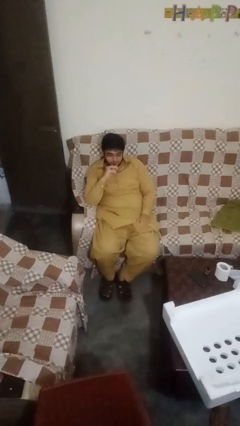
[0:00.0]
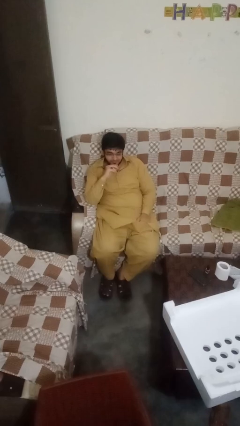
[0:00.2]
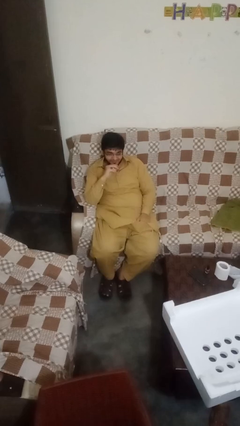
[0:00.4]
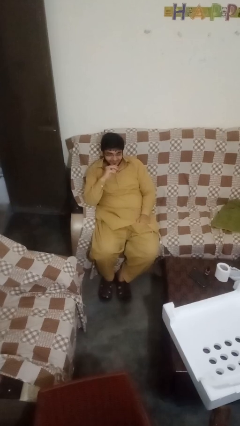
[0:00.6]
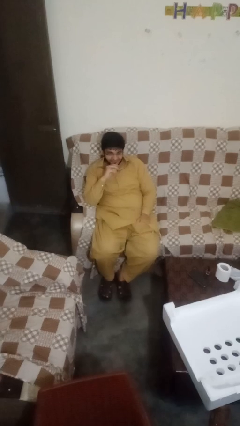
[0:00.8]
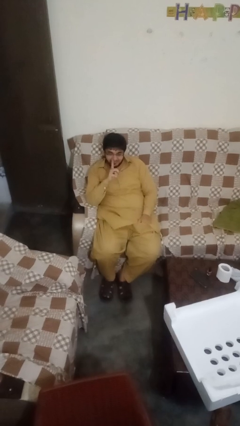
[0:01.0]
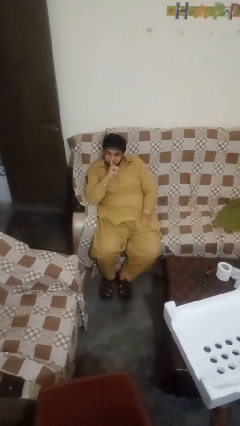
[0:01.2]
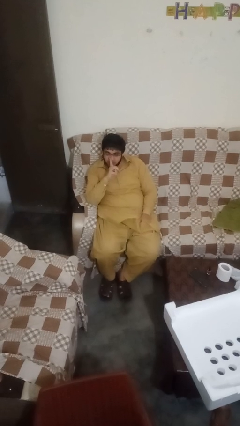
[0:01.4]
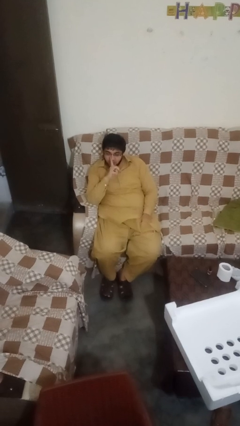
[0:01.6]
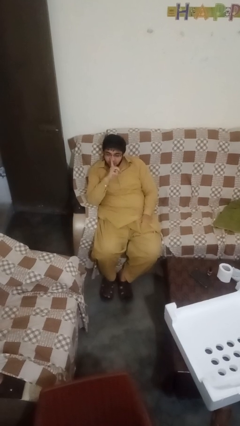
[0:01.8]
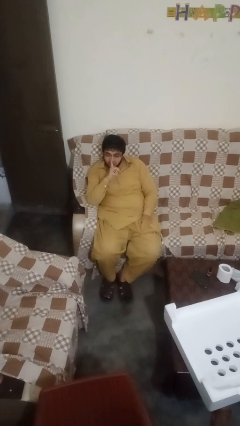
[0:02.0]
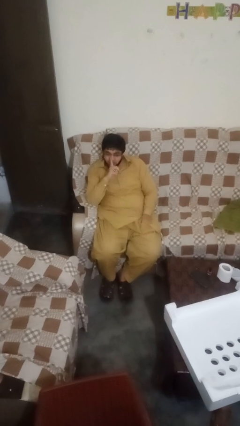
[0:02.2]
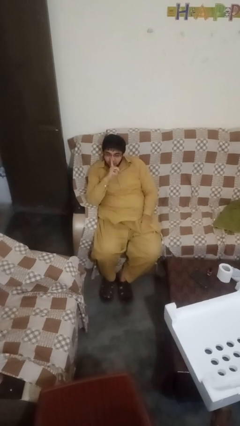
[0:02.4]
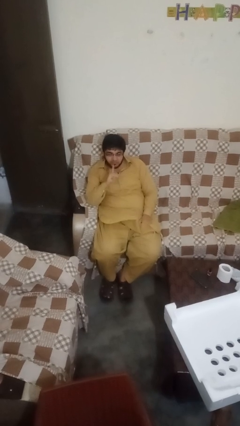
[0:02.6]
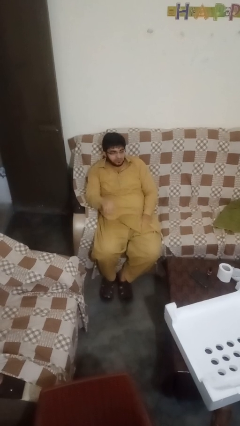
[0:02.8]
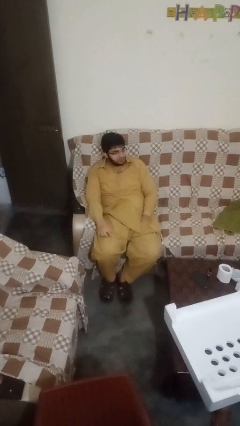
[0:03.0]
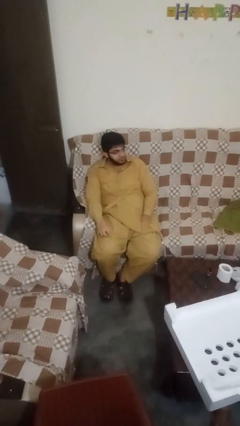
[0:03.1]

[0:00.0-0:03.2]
person gestures be quiet

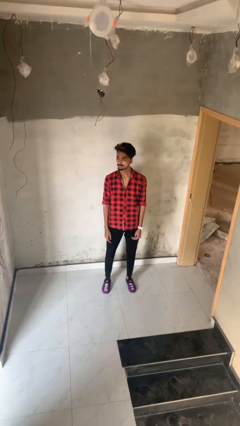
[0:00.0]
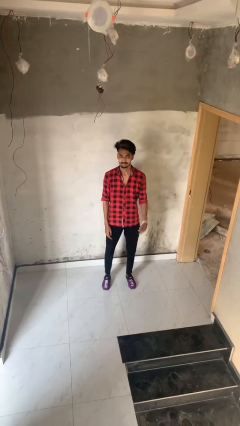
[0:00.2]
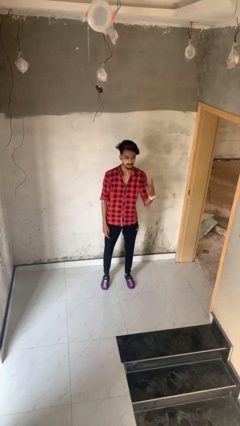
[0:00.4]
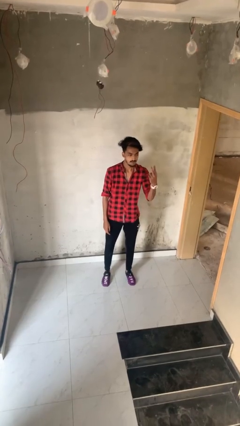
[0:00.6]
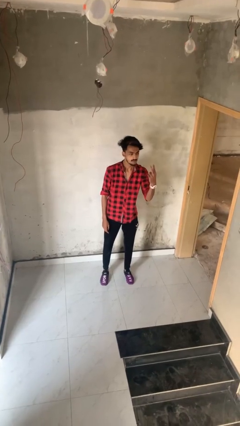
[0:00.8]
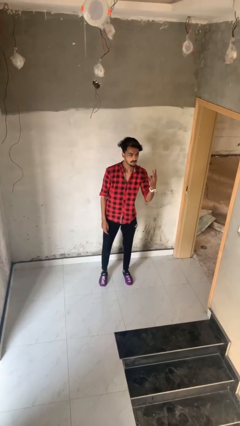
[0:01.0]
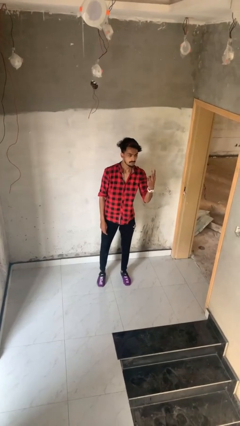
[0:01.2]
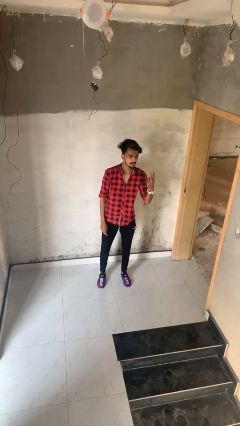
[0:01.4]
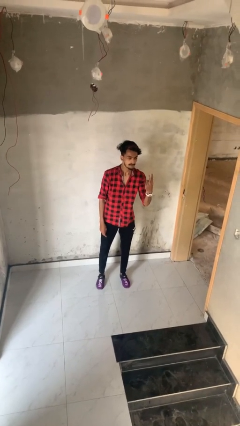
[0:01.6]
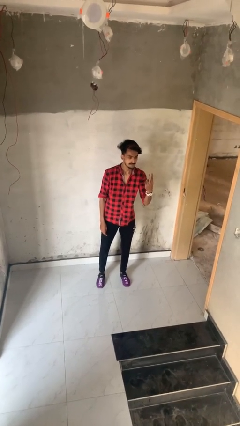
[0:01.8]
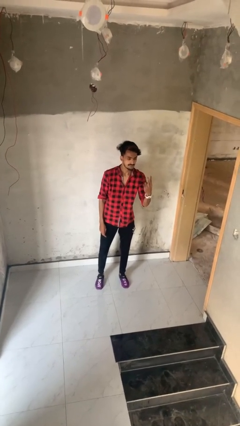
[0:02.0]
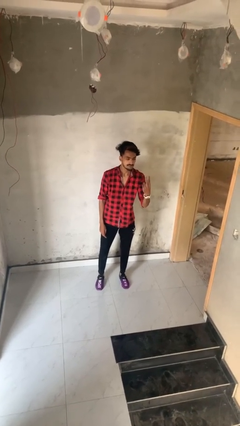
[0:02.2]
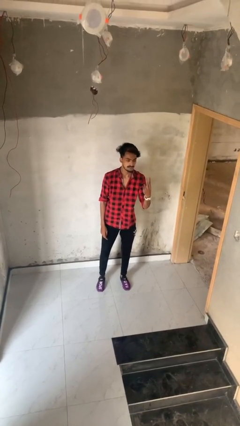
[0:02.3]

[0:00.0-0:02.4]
person gestures peace

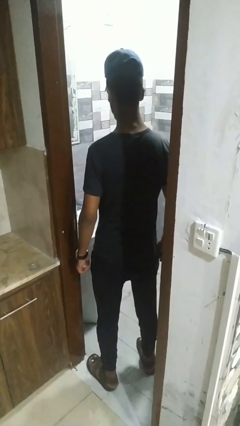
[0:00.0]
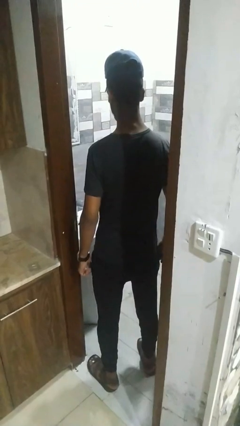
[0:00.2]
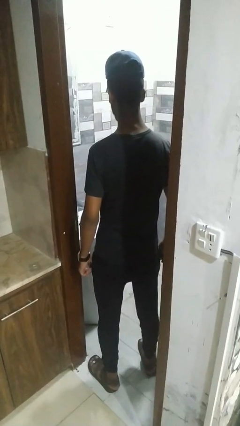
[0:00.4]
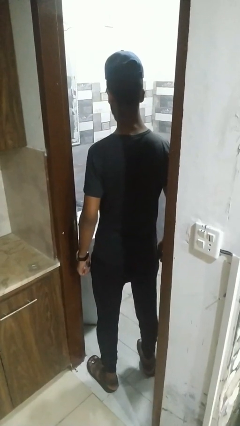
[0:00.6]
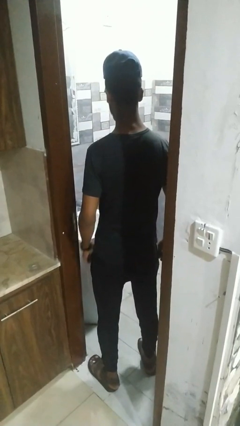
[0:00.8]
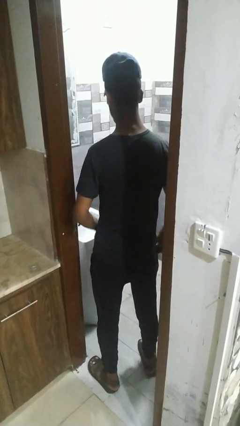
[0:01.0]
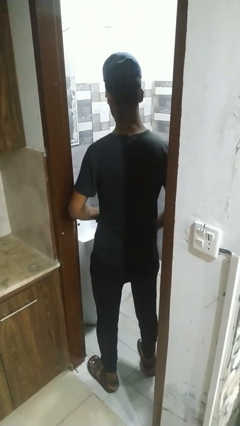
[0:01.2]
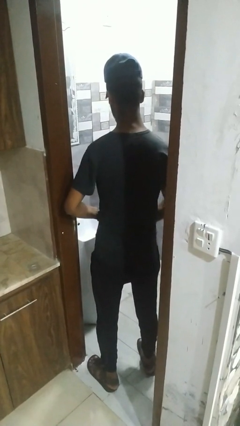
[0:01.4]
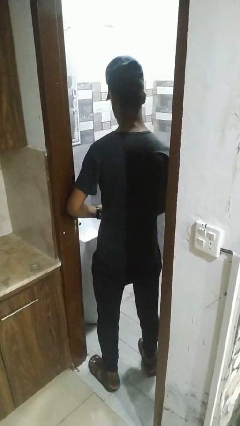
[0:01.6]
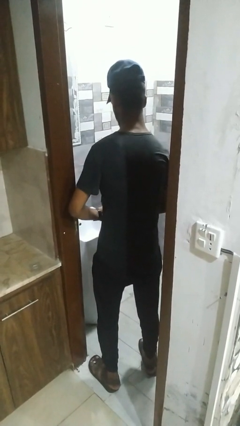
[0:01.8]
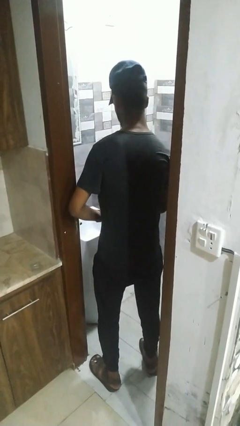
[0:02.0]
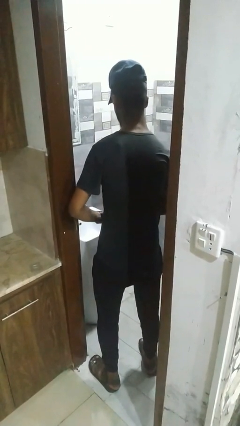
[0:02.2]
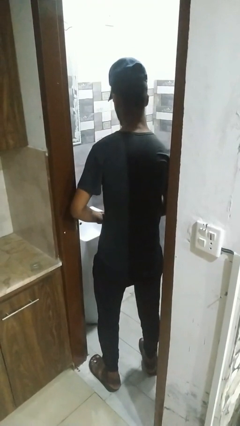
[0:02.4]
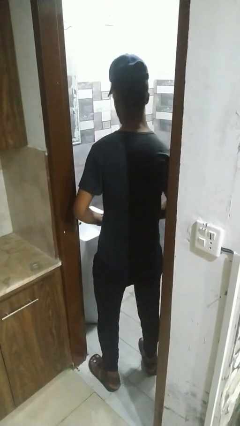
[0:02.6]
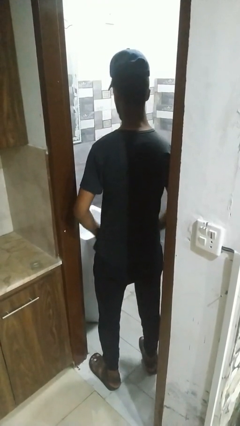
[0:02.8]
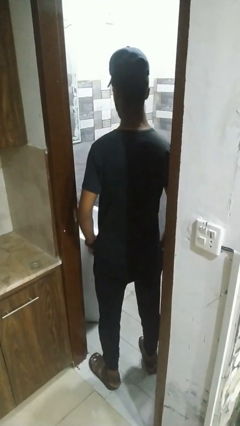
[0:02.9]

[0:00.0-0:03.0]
person applies deodorant

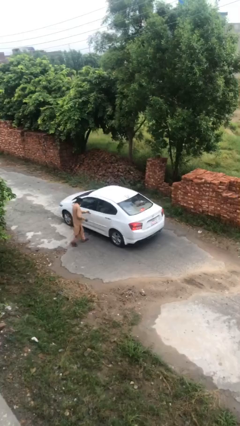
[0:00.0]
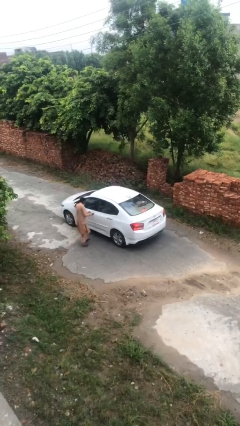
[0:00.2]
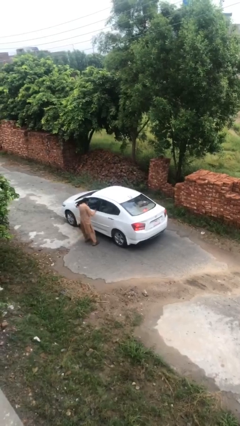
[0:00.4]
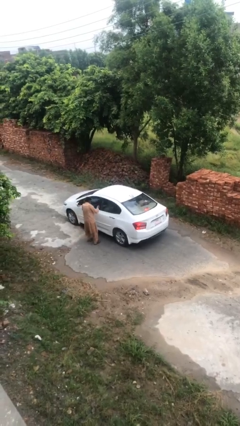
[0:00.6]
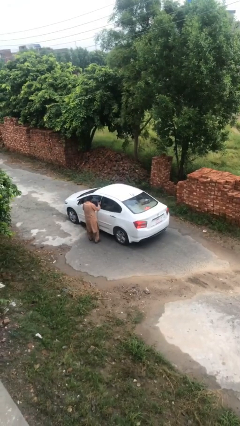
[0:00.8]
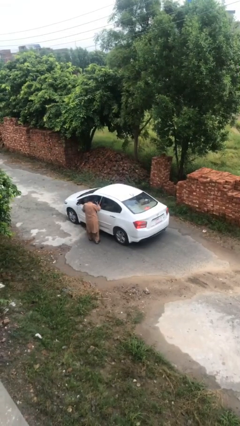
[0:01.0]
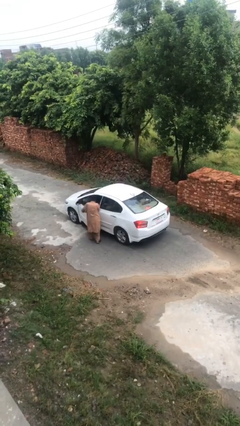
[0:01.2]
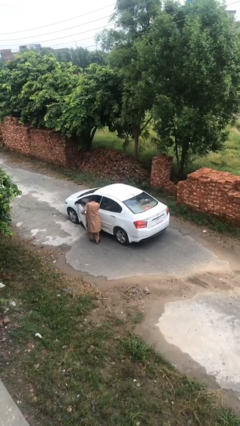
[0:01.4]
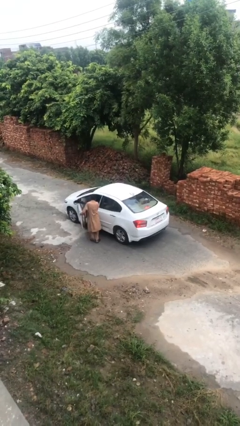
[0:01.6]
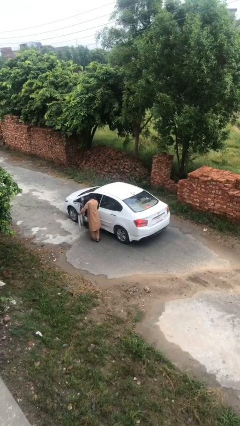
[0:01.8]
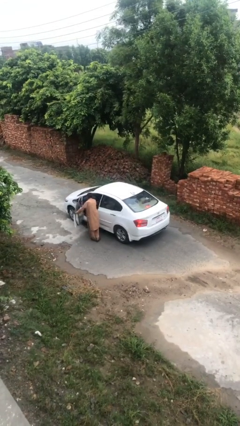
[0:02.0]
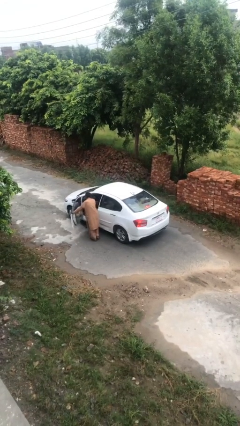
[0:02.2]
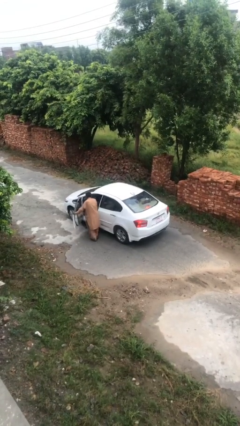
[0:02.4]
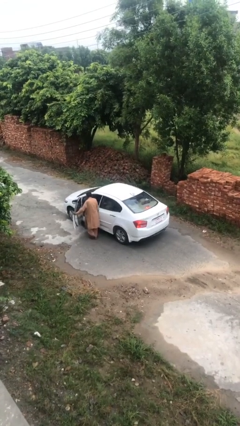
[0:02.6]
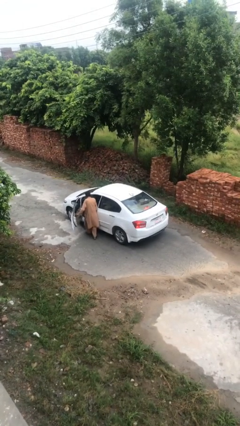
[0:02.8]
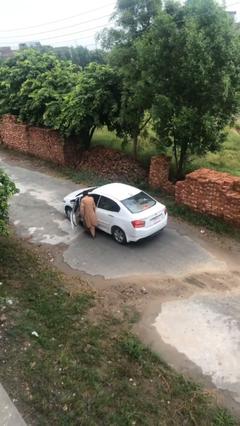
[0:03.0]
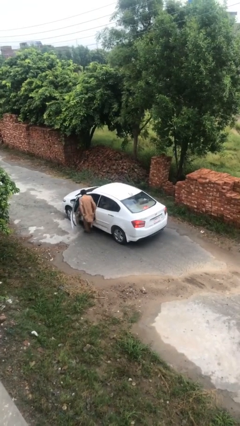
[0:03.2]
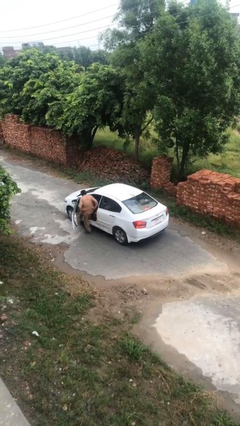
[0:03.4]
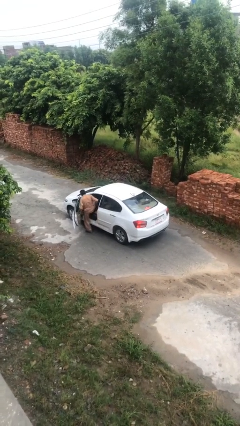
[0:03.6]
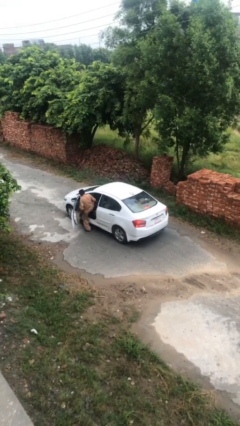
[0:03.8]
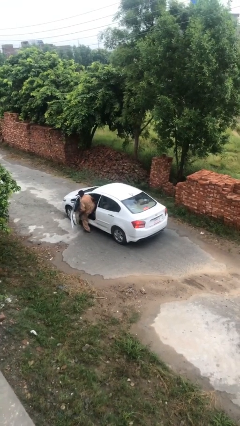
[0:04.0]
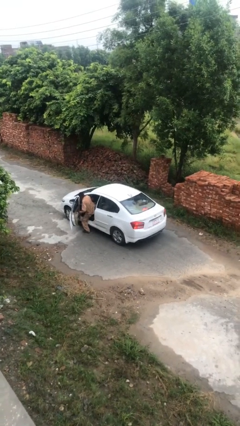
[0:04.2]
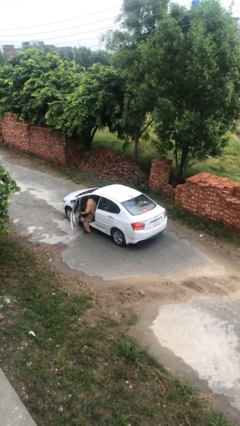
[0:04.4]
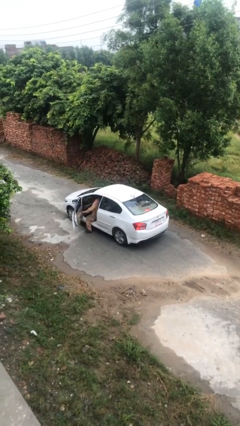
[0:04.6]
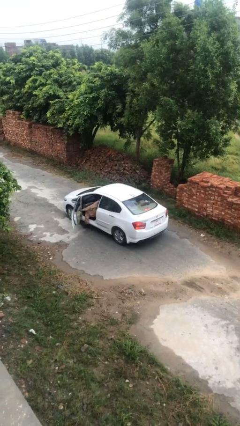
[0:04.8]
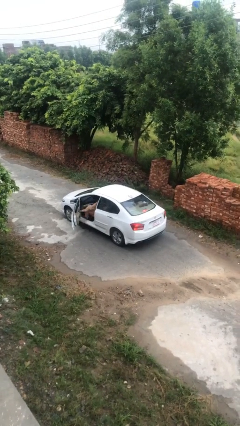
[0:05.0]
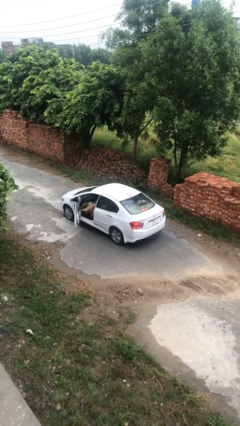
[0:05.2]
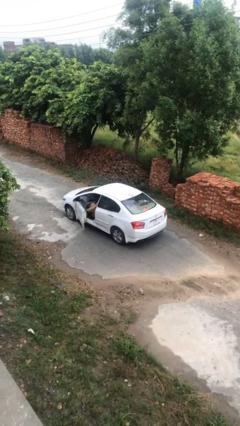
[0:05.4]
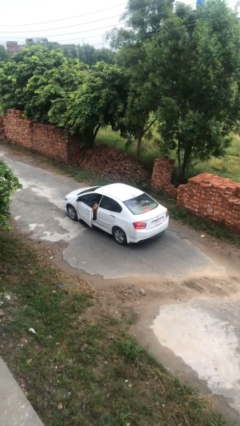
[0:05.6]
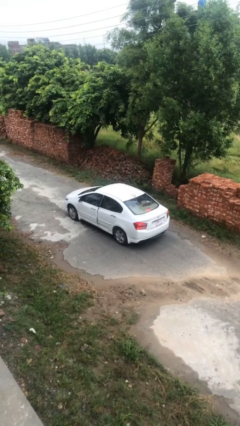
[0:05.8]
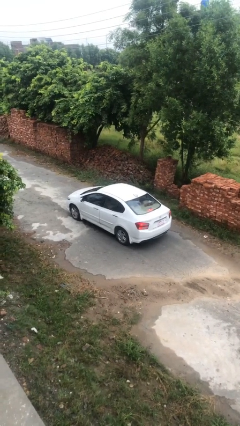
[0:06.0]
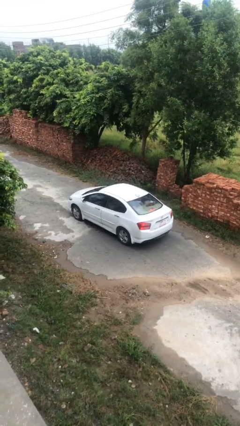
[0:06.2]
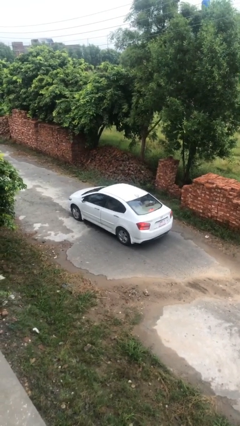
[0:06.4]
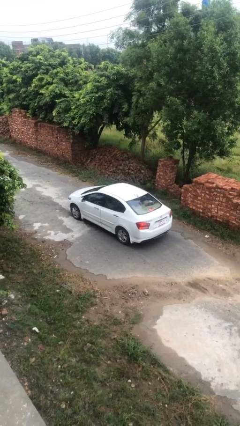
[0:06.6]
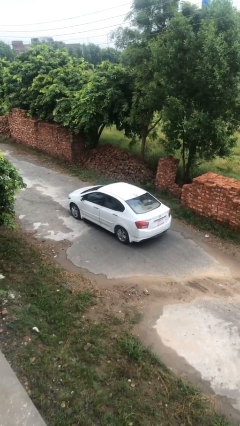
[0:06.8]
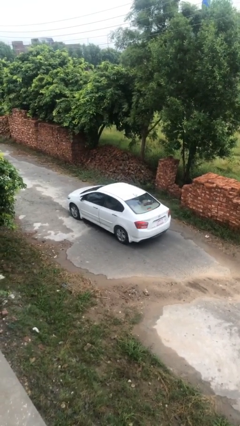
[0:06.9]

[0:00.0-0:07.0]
car picks up person

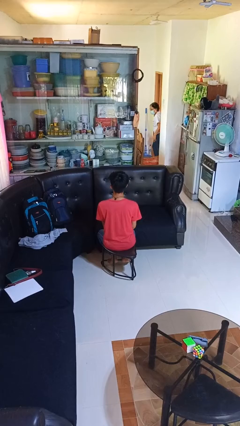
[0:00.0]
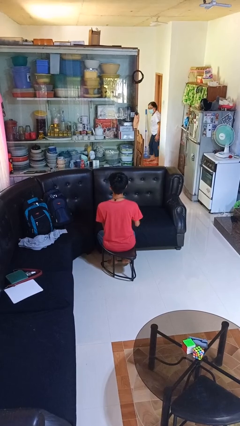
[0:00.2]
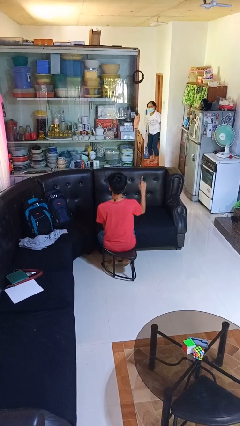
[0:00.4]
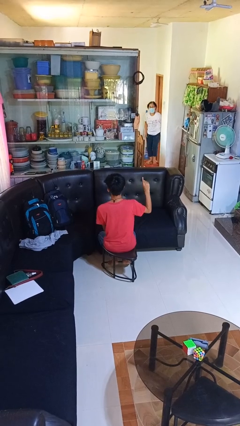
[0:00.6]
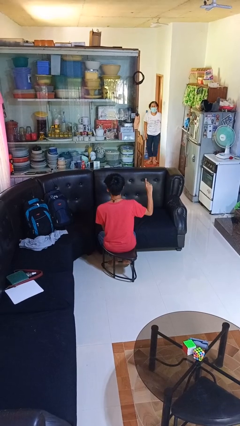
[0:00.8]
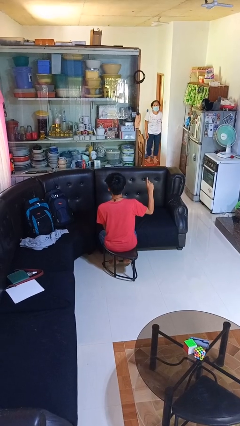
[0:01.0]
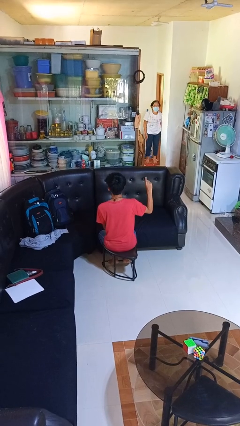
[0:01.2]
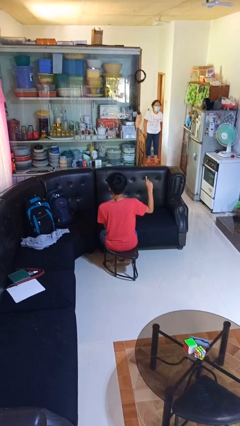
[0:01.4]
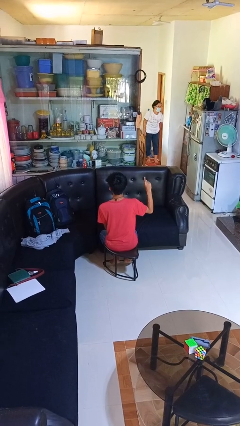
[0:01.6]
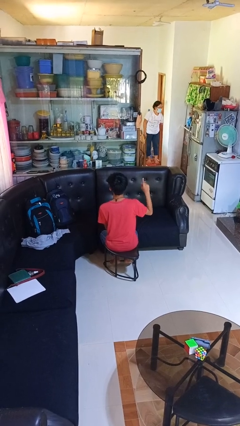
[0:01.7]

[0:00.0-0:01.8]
person gestures number one

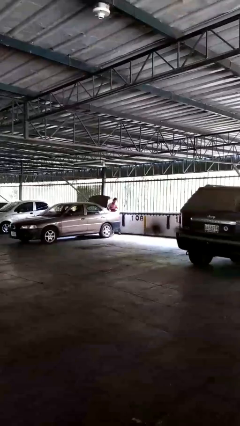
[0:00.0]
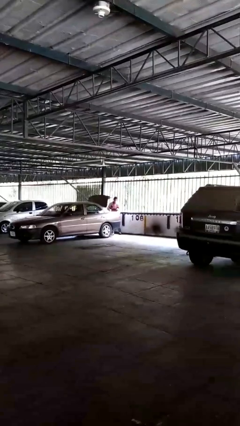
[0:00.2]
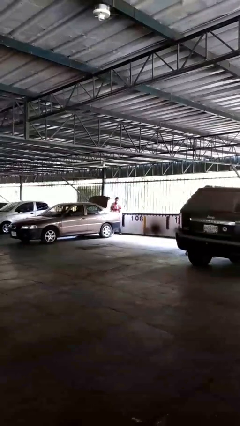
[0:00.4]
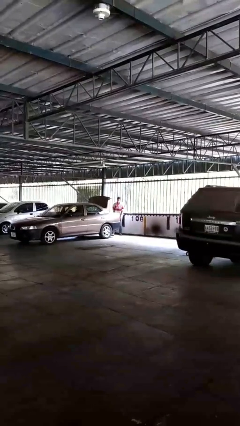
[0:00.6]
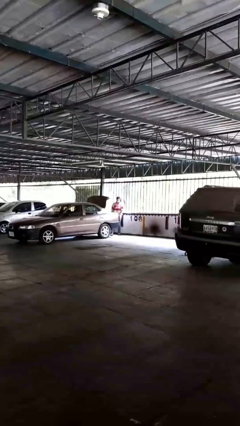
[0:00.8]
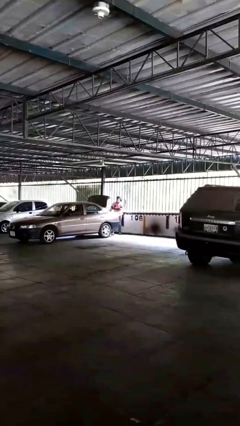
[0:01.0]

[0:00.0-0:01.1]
person loads car
